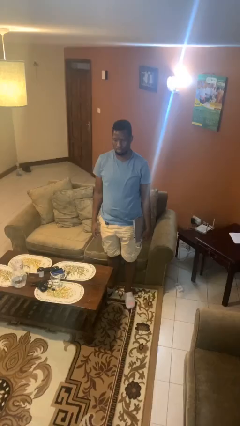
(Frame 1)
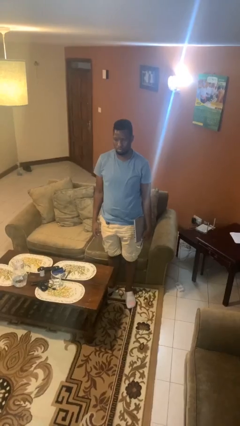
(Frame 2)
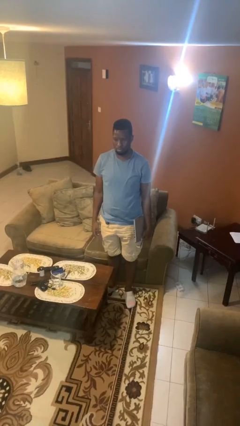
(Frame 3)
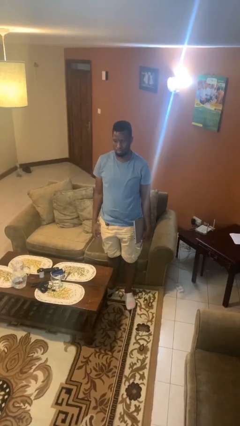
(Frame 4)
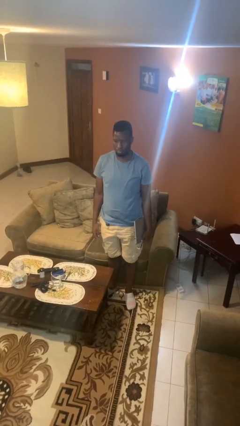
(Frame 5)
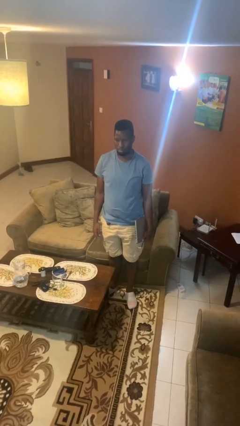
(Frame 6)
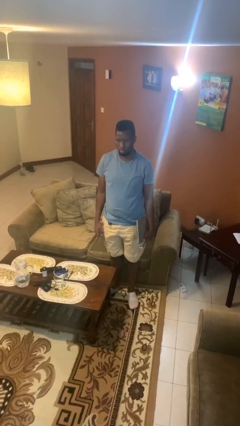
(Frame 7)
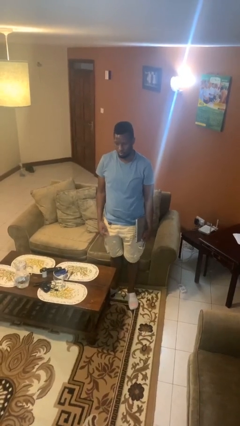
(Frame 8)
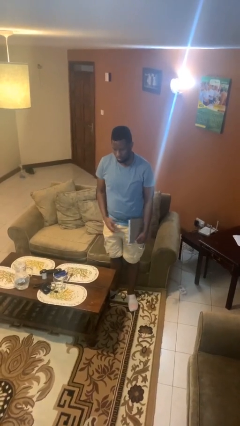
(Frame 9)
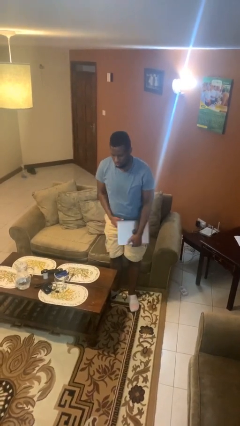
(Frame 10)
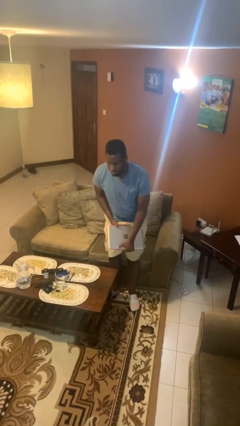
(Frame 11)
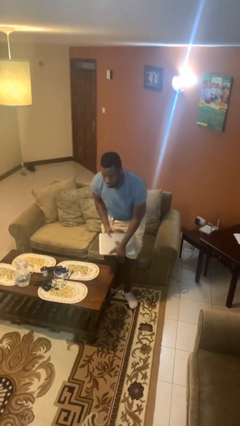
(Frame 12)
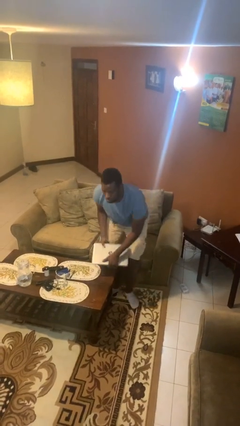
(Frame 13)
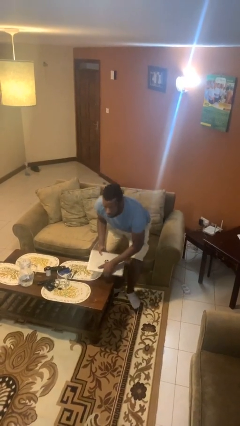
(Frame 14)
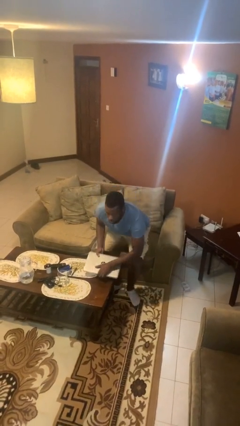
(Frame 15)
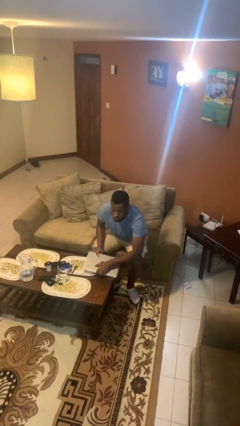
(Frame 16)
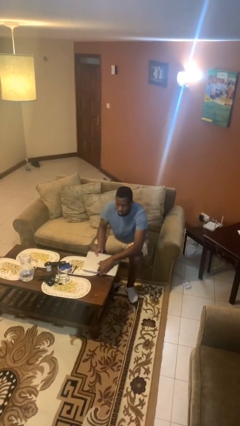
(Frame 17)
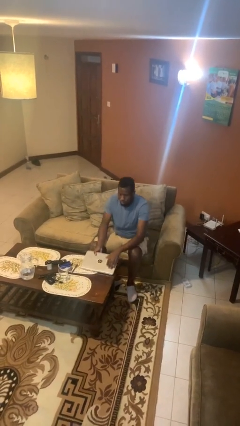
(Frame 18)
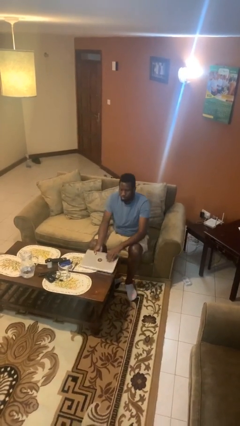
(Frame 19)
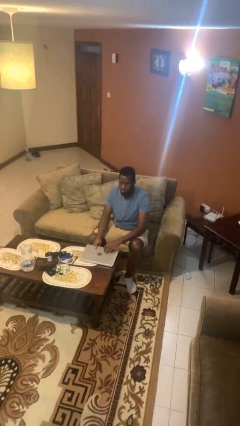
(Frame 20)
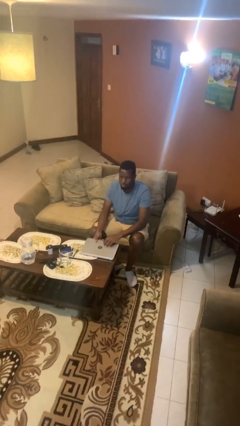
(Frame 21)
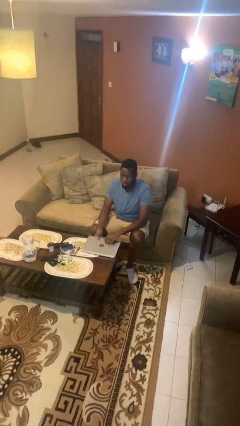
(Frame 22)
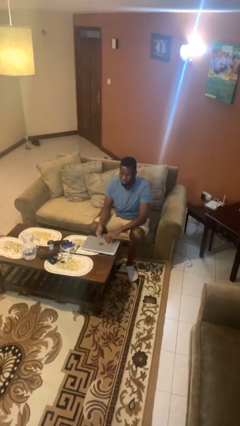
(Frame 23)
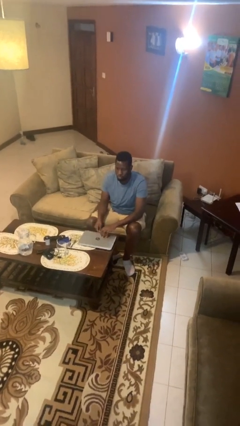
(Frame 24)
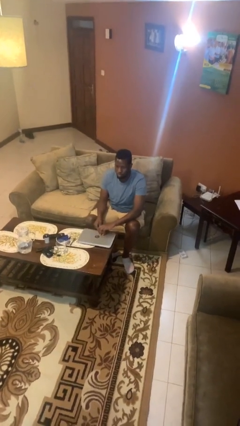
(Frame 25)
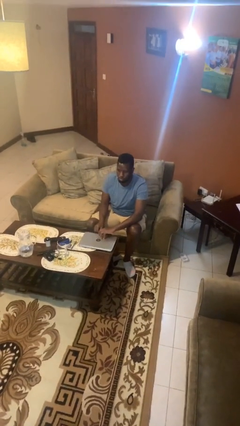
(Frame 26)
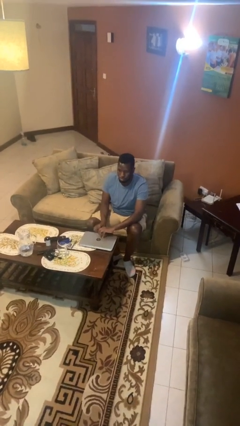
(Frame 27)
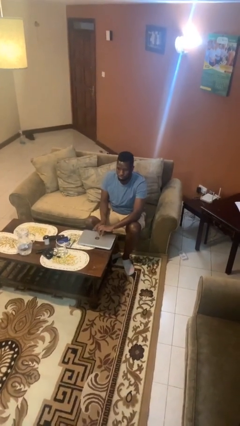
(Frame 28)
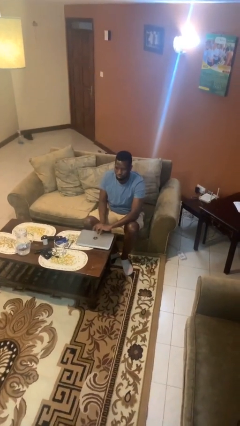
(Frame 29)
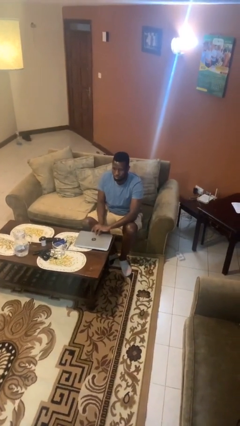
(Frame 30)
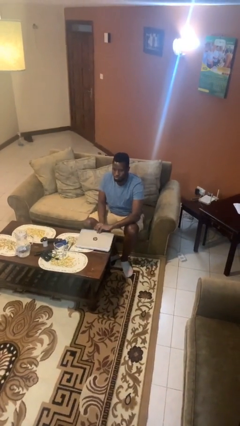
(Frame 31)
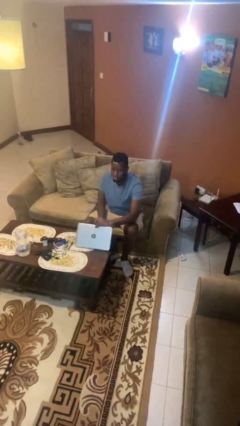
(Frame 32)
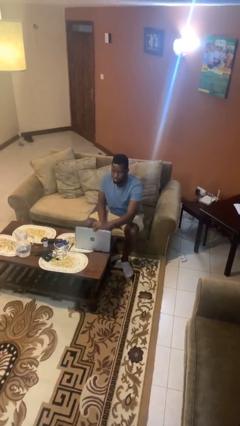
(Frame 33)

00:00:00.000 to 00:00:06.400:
person sits down

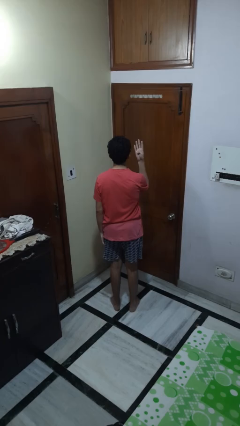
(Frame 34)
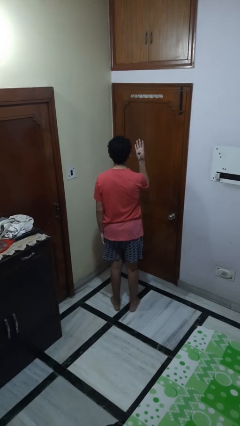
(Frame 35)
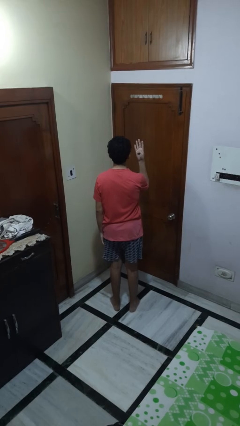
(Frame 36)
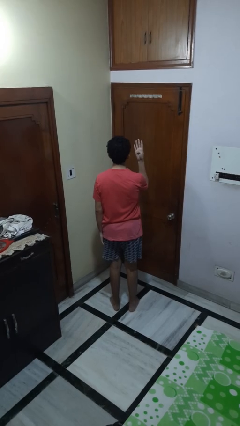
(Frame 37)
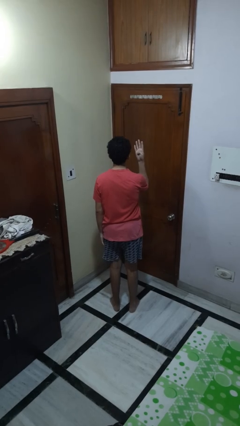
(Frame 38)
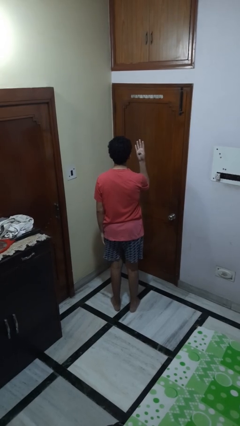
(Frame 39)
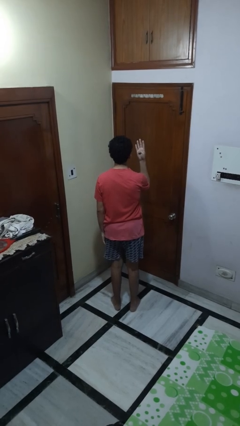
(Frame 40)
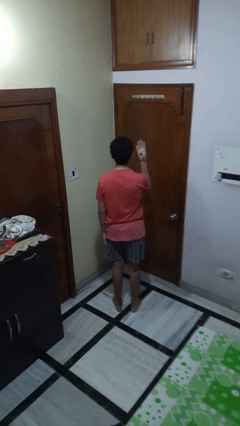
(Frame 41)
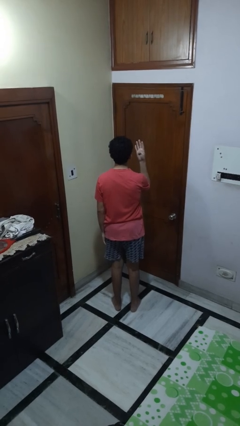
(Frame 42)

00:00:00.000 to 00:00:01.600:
person gestures number four

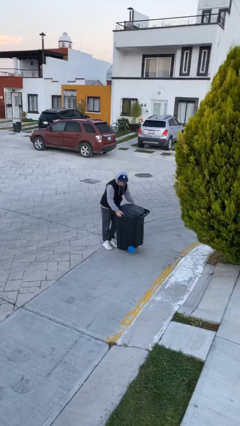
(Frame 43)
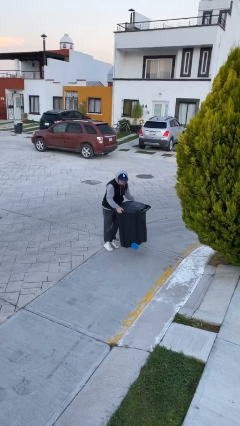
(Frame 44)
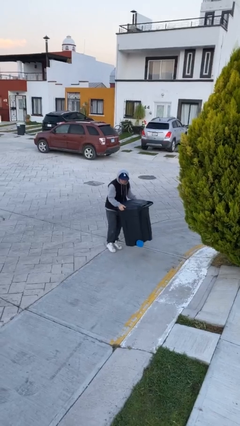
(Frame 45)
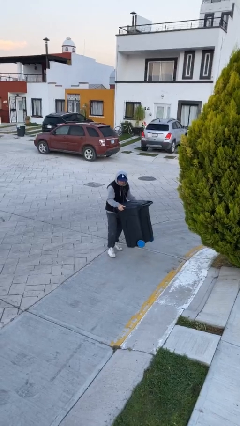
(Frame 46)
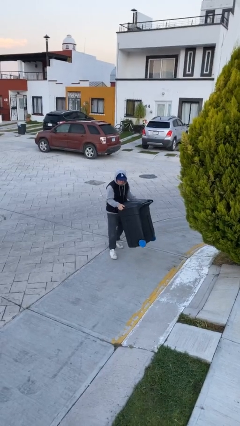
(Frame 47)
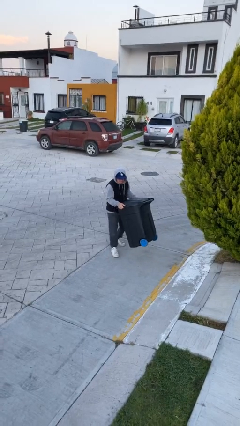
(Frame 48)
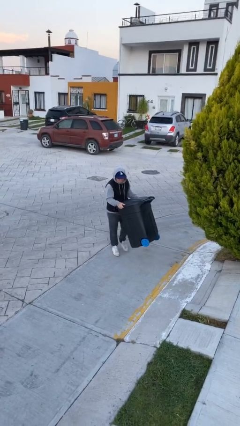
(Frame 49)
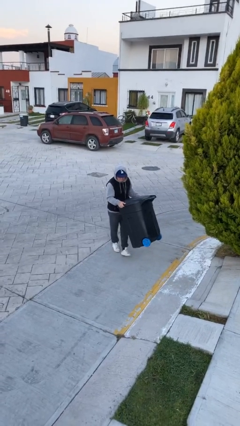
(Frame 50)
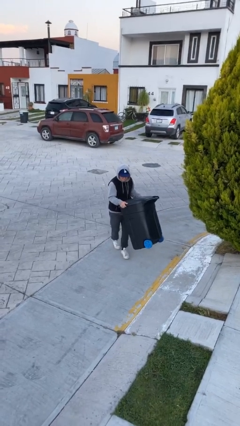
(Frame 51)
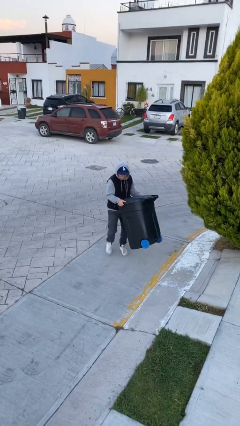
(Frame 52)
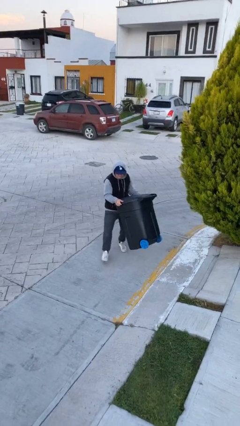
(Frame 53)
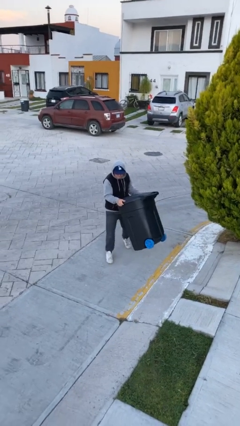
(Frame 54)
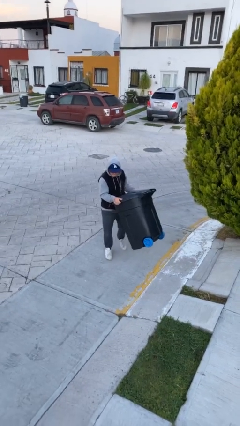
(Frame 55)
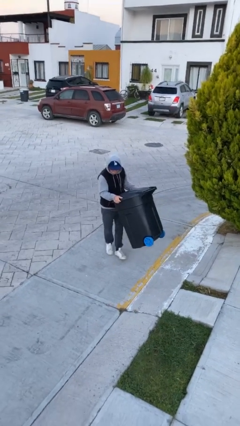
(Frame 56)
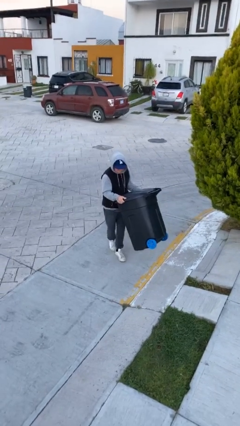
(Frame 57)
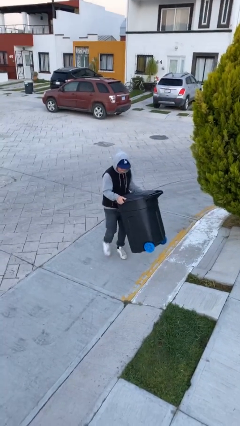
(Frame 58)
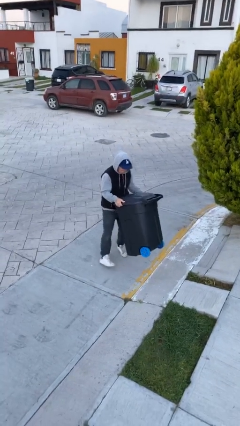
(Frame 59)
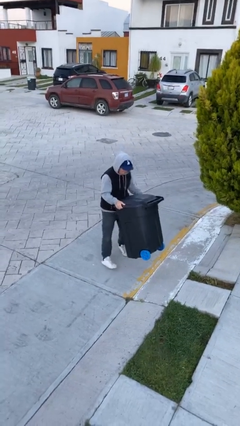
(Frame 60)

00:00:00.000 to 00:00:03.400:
person carries heavy object

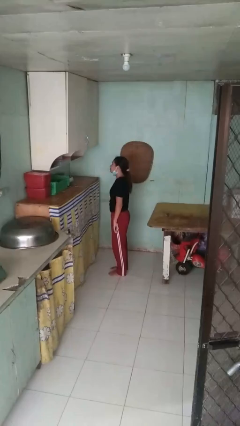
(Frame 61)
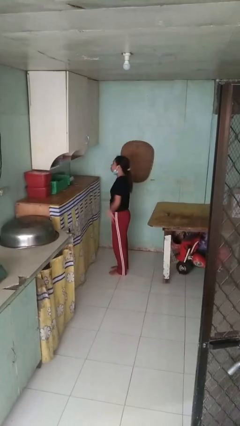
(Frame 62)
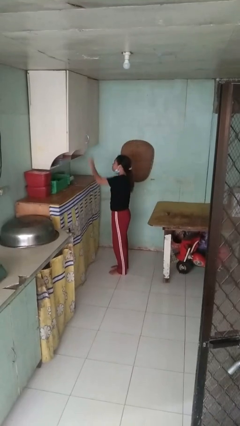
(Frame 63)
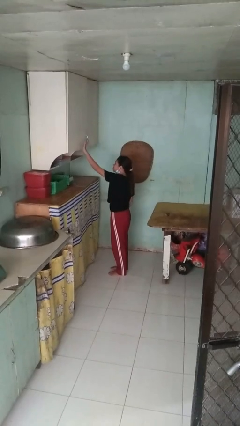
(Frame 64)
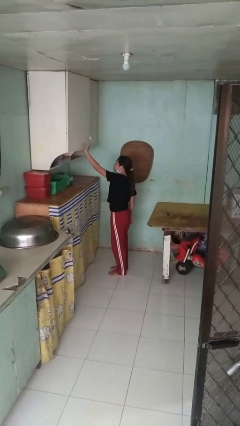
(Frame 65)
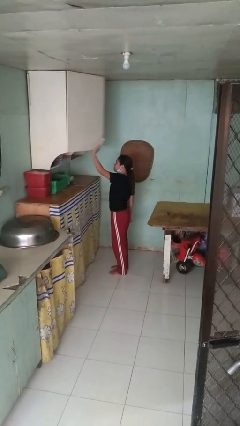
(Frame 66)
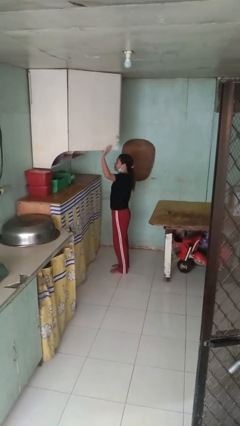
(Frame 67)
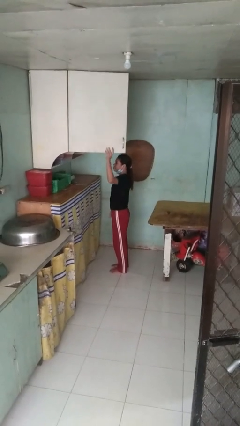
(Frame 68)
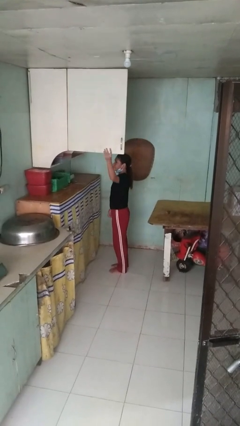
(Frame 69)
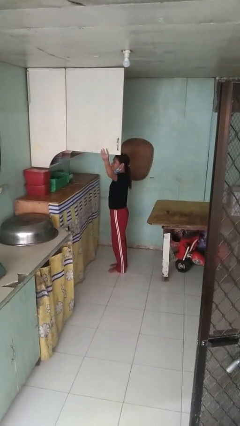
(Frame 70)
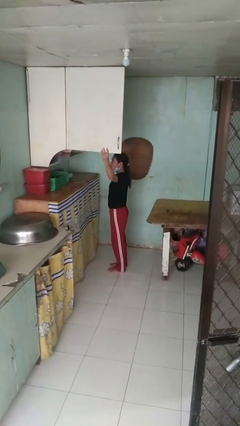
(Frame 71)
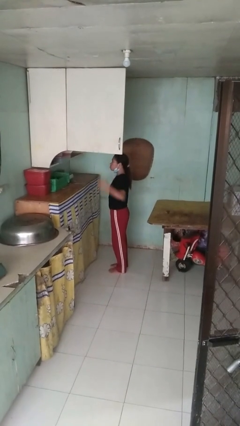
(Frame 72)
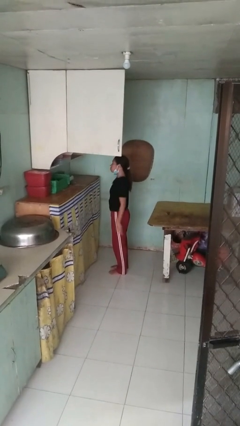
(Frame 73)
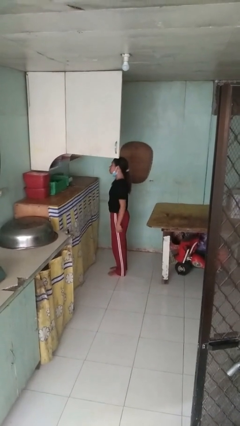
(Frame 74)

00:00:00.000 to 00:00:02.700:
person opens cabinet

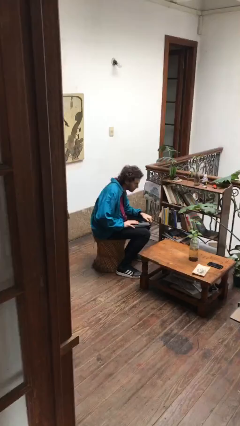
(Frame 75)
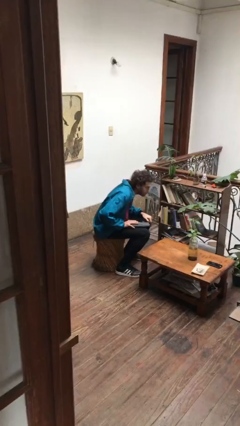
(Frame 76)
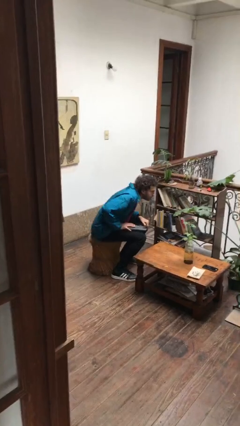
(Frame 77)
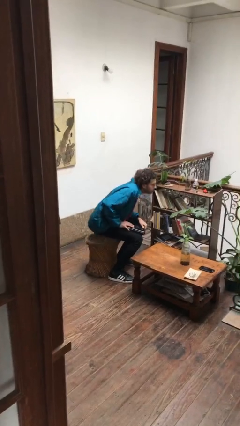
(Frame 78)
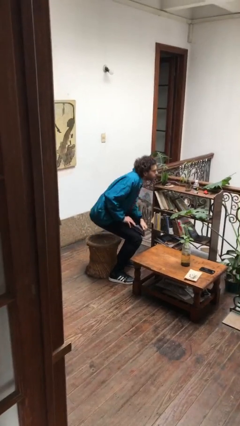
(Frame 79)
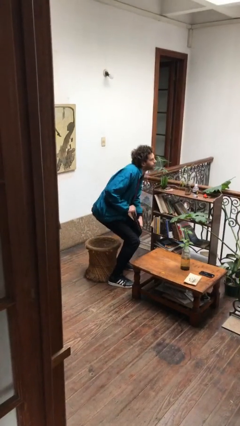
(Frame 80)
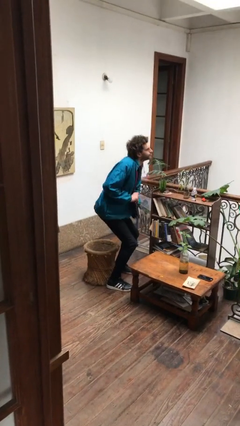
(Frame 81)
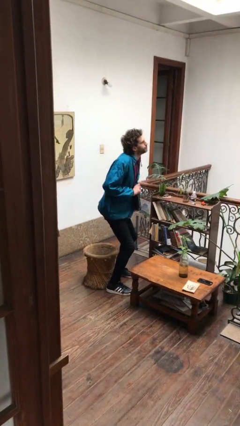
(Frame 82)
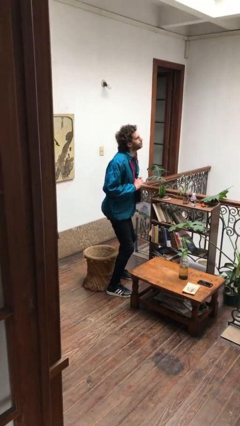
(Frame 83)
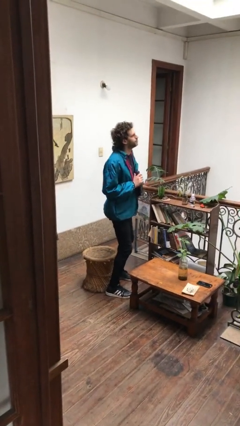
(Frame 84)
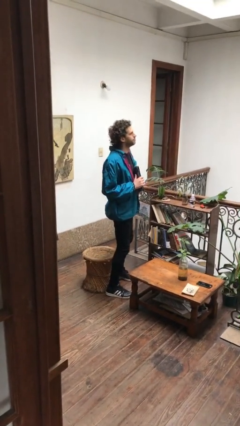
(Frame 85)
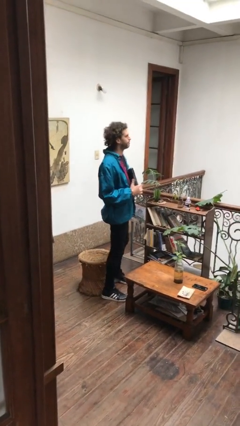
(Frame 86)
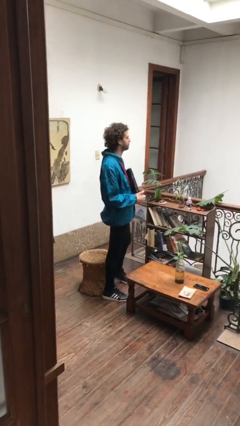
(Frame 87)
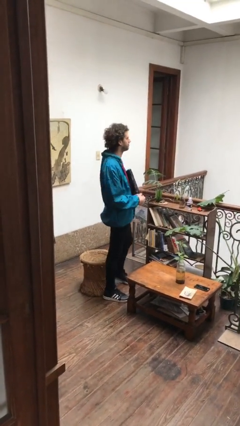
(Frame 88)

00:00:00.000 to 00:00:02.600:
person stands up

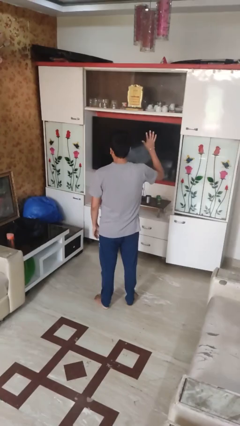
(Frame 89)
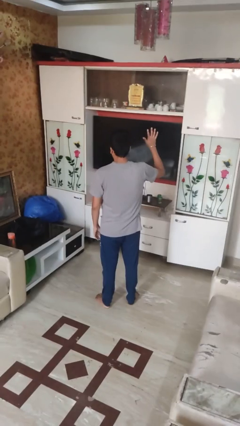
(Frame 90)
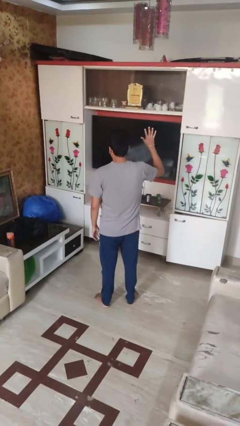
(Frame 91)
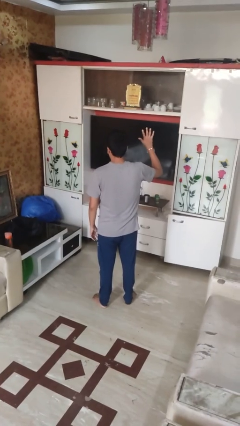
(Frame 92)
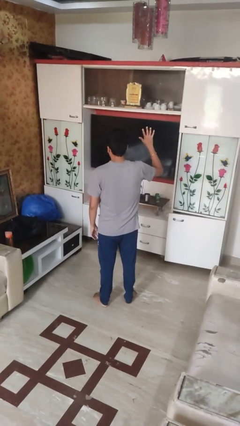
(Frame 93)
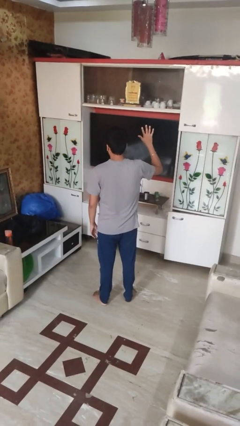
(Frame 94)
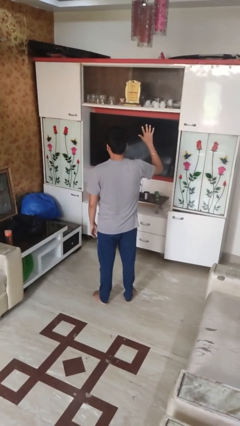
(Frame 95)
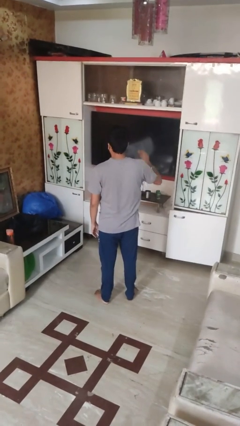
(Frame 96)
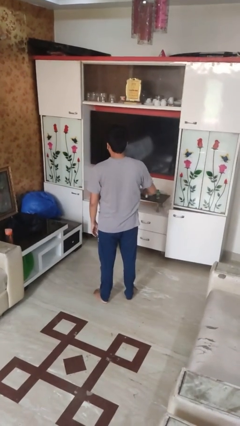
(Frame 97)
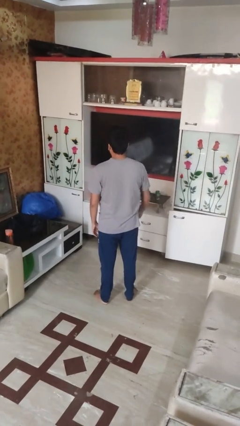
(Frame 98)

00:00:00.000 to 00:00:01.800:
person gestures number five
